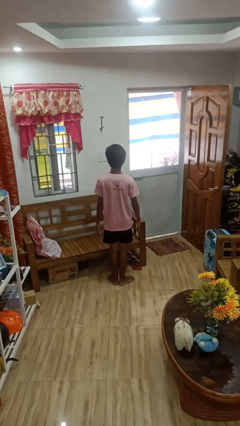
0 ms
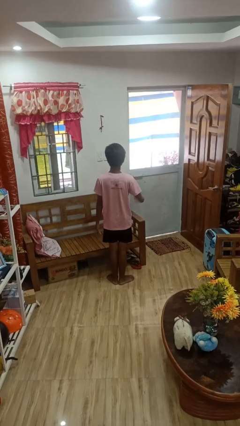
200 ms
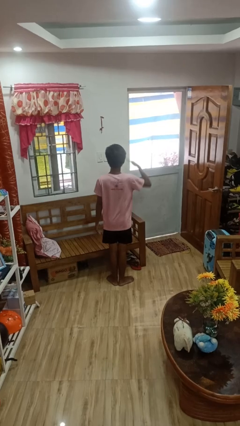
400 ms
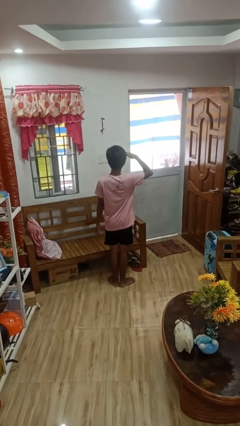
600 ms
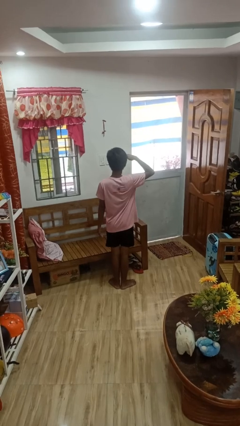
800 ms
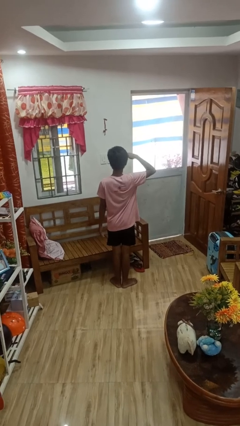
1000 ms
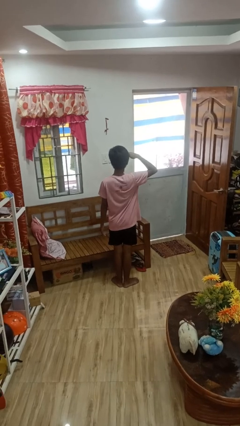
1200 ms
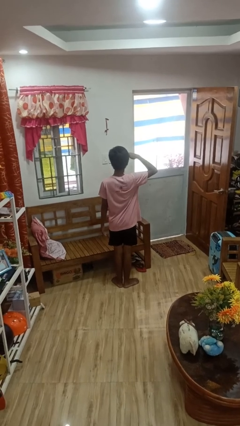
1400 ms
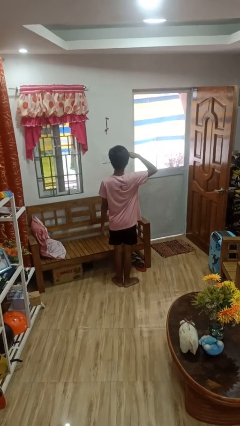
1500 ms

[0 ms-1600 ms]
person salutes

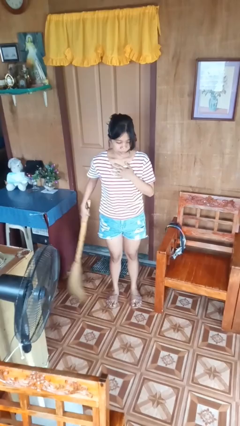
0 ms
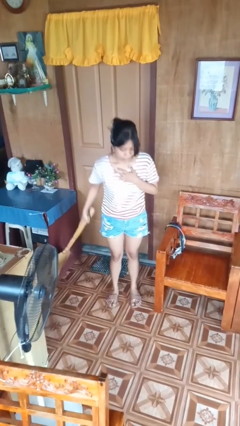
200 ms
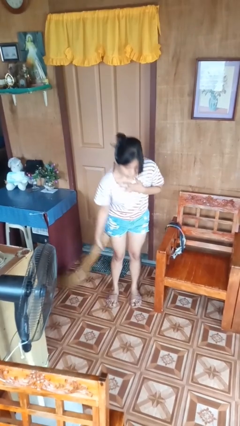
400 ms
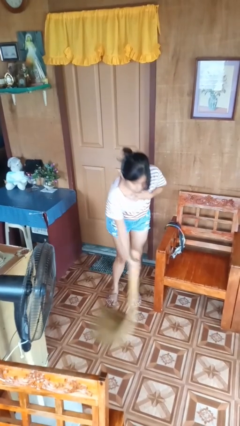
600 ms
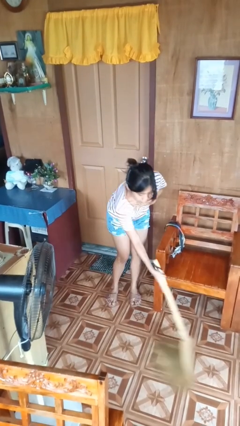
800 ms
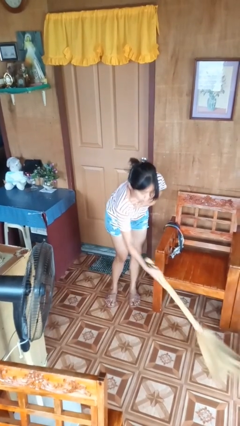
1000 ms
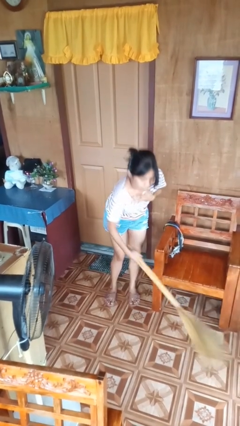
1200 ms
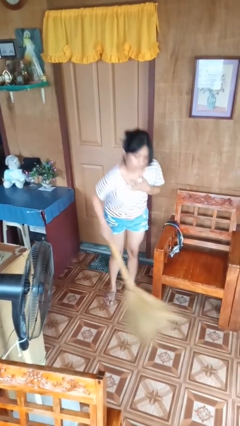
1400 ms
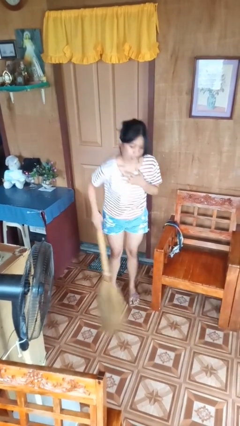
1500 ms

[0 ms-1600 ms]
person sweeps floor

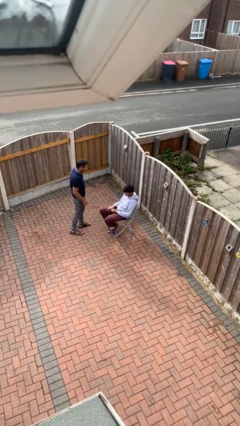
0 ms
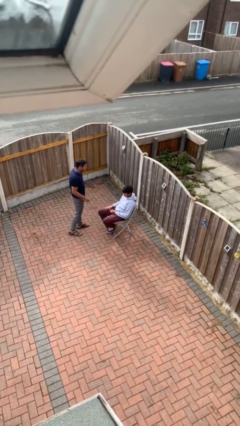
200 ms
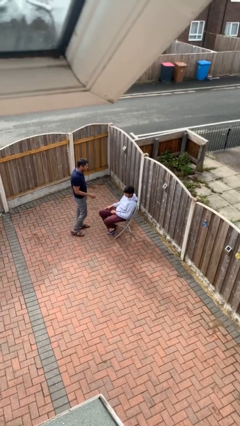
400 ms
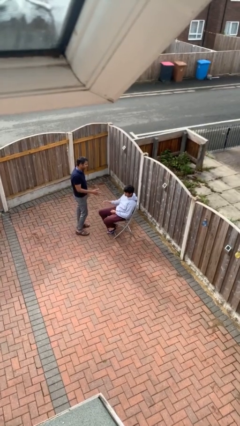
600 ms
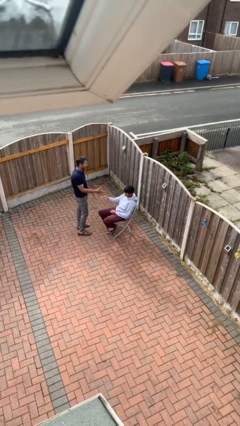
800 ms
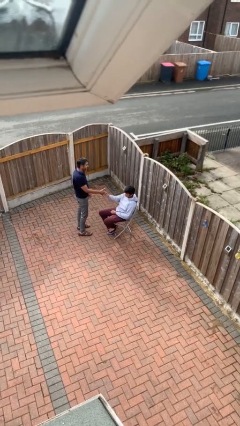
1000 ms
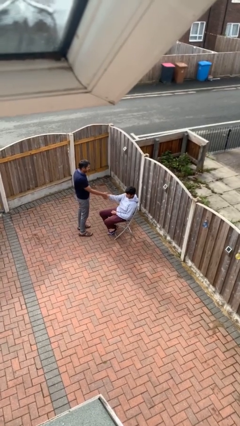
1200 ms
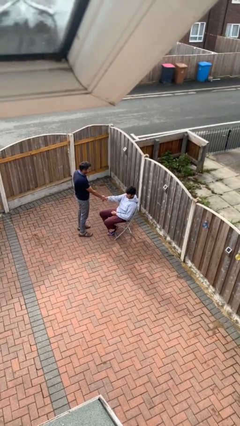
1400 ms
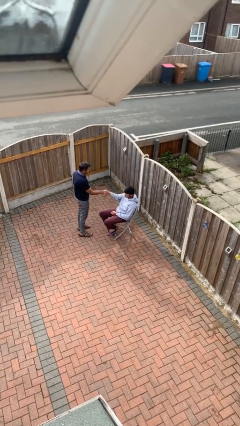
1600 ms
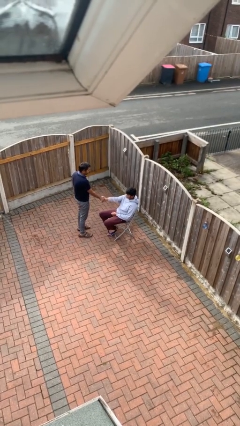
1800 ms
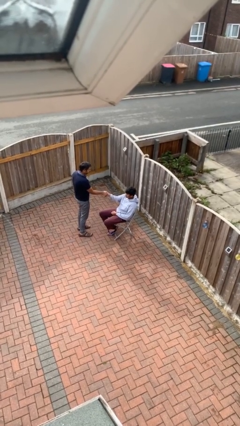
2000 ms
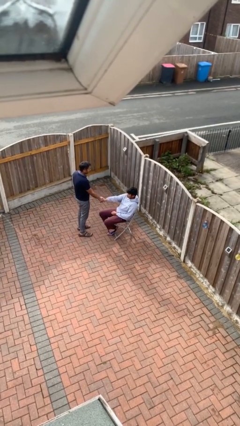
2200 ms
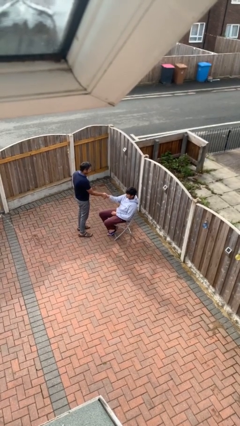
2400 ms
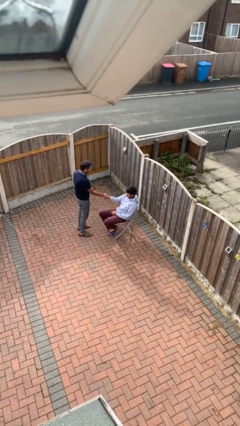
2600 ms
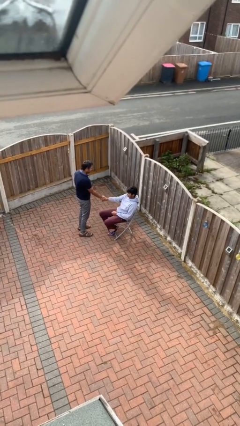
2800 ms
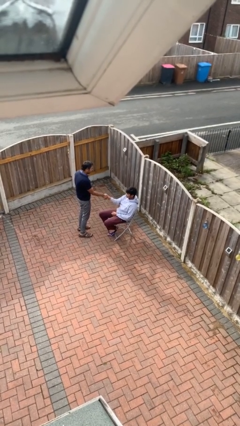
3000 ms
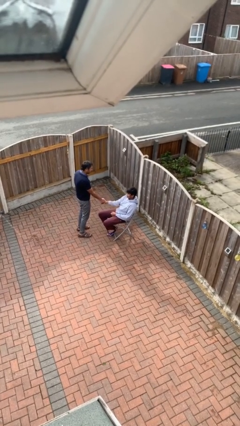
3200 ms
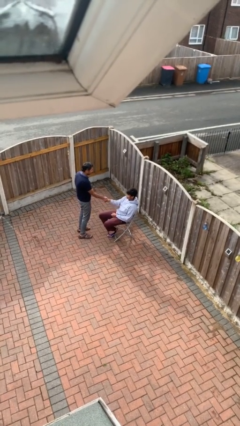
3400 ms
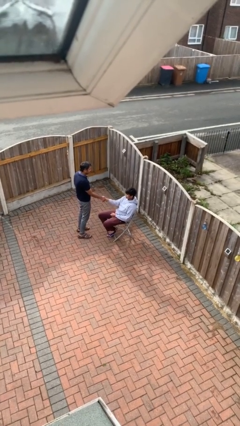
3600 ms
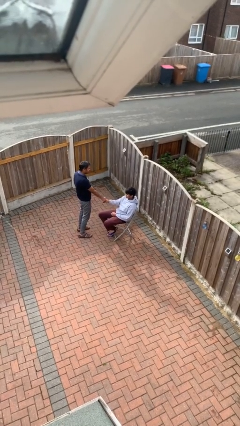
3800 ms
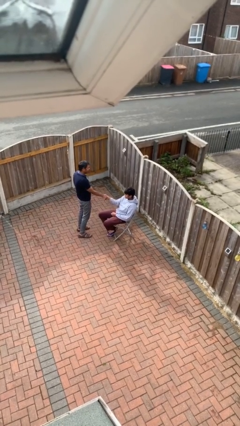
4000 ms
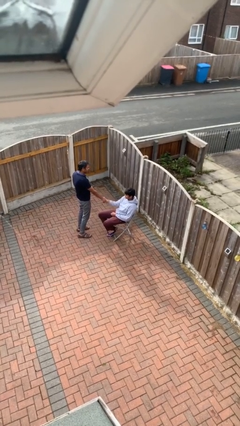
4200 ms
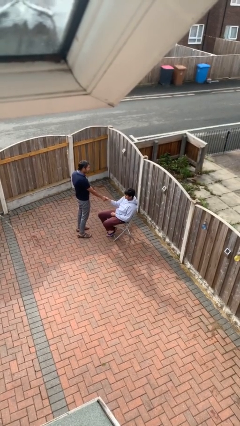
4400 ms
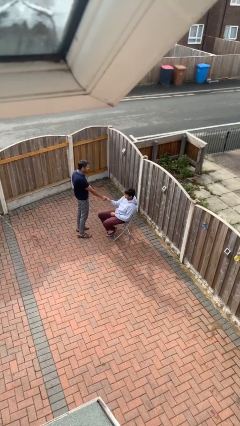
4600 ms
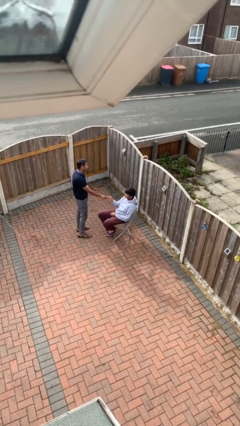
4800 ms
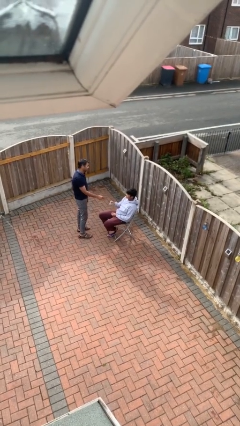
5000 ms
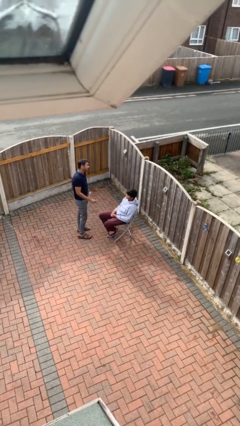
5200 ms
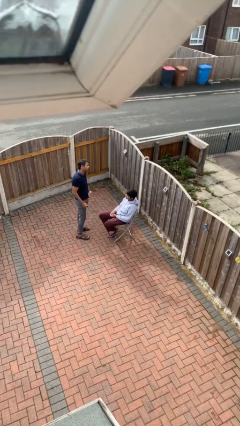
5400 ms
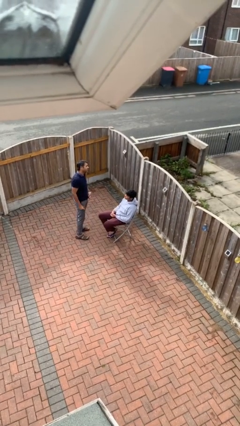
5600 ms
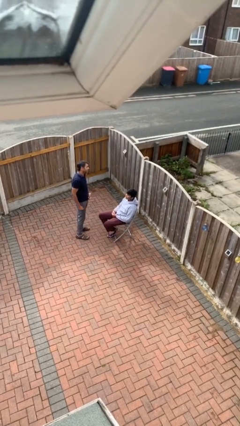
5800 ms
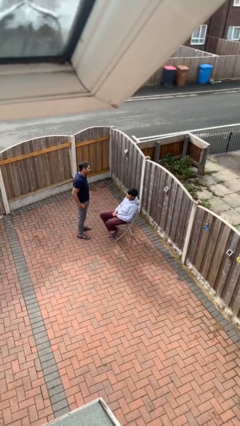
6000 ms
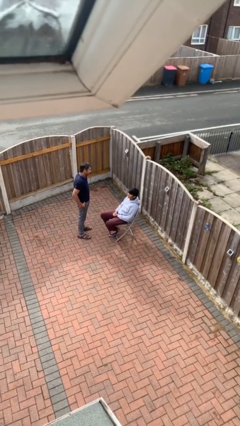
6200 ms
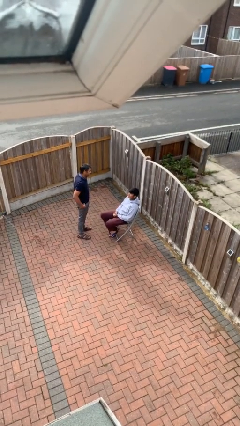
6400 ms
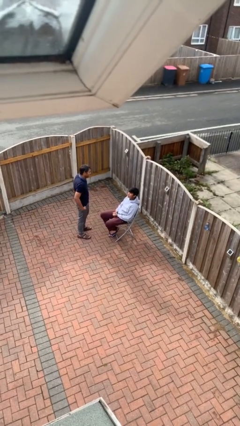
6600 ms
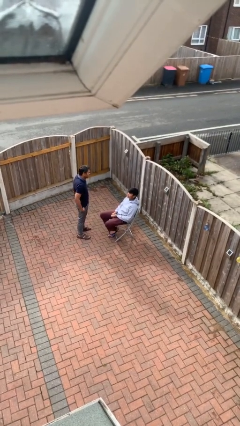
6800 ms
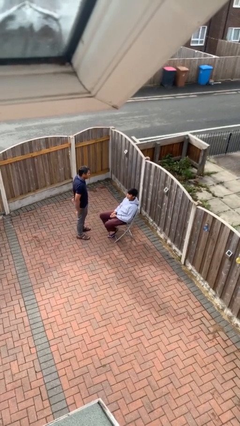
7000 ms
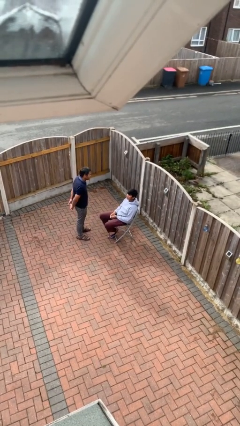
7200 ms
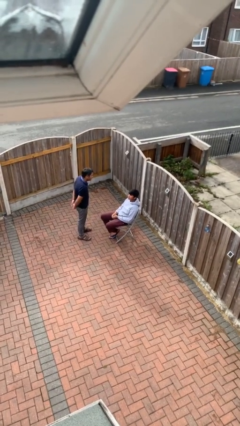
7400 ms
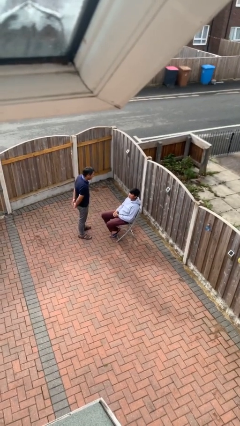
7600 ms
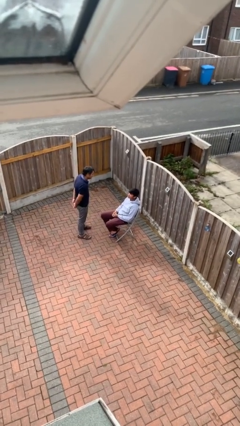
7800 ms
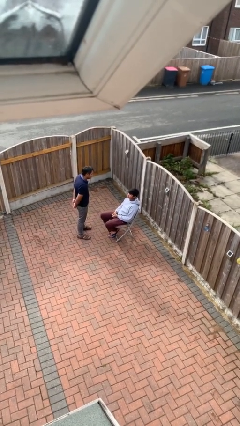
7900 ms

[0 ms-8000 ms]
person shakes hand

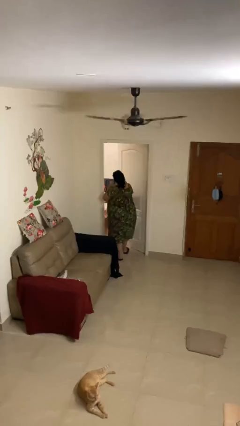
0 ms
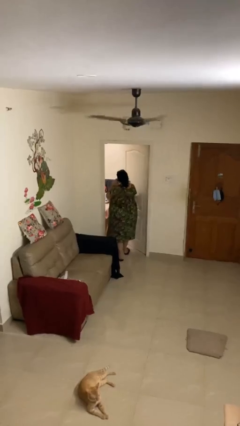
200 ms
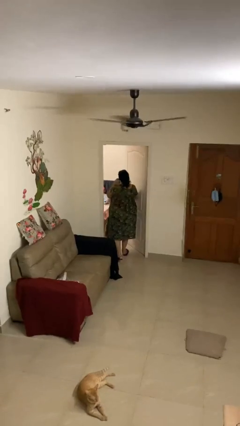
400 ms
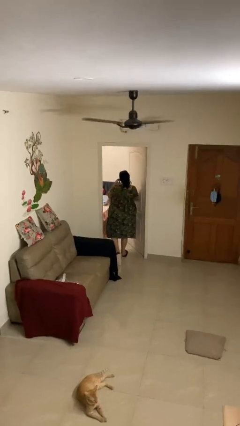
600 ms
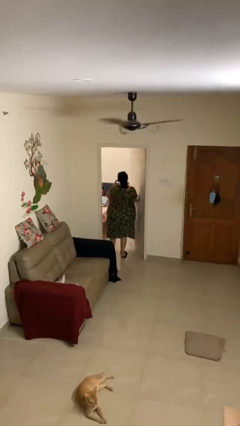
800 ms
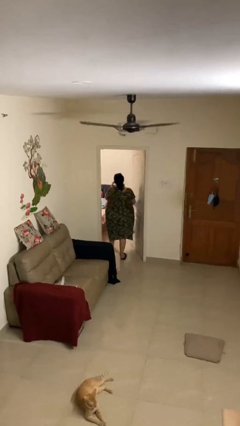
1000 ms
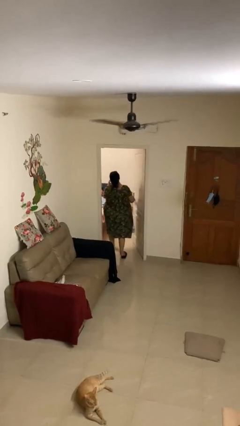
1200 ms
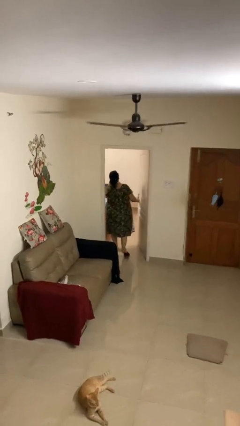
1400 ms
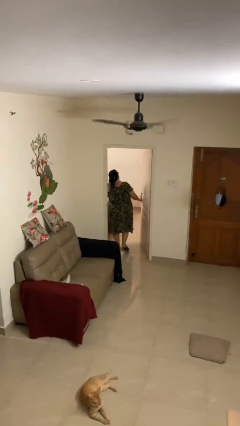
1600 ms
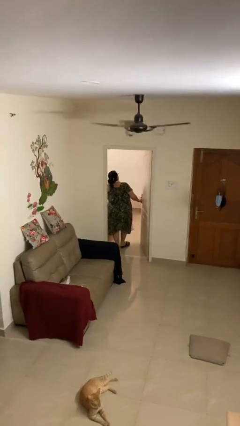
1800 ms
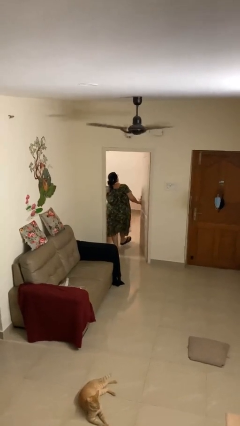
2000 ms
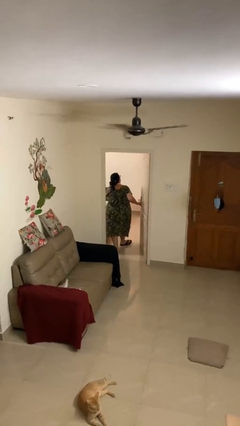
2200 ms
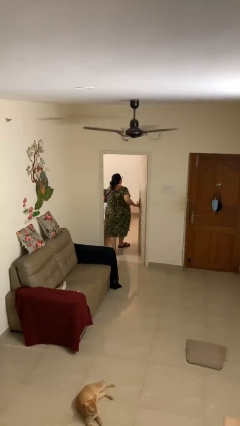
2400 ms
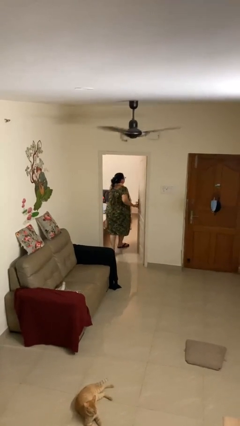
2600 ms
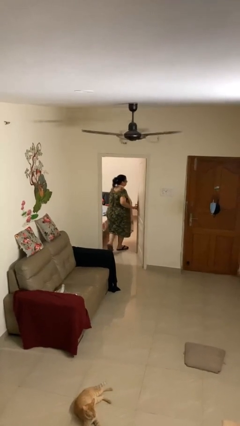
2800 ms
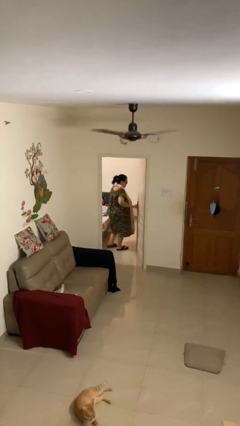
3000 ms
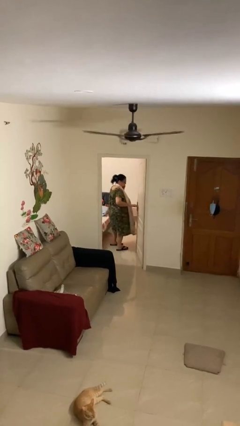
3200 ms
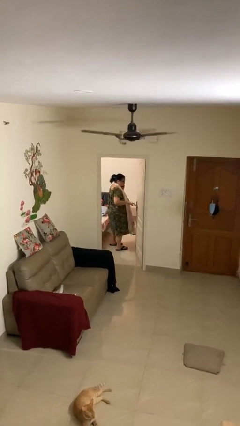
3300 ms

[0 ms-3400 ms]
person exits scene through structure

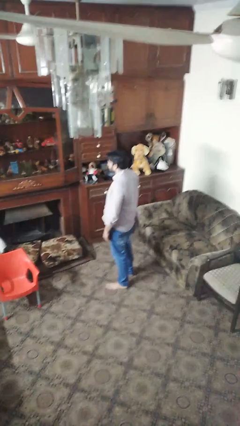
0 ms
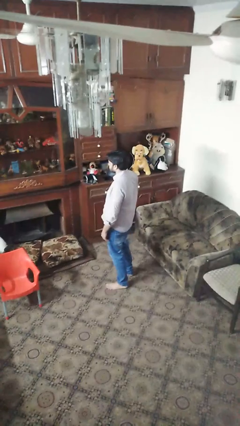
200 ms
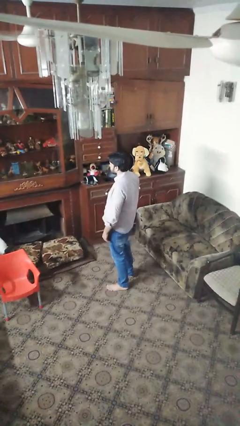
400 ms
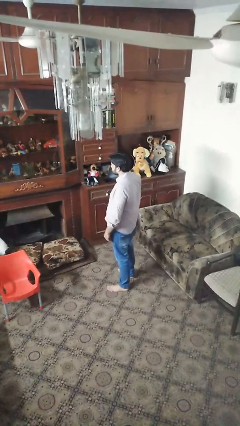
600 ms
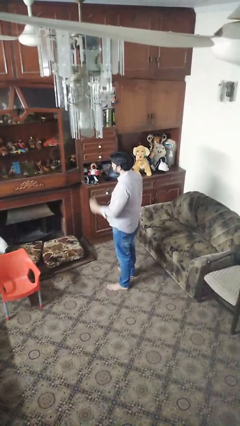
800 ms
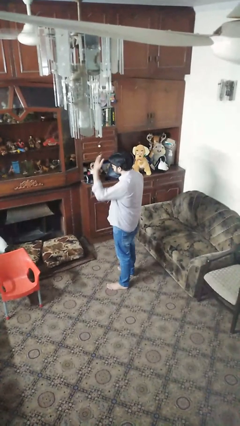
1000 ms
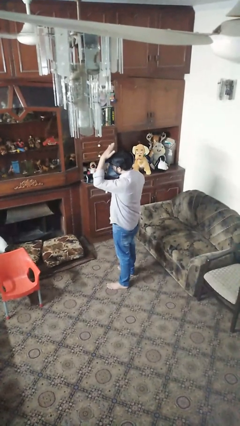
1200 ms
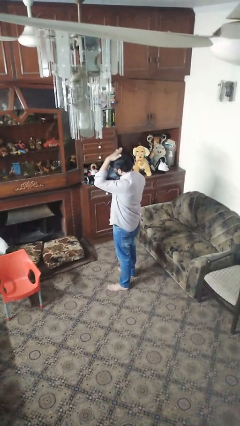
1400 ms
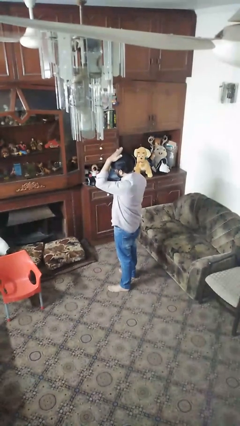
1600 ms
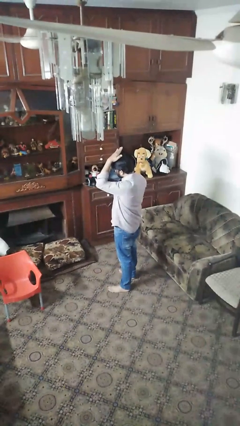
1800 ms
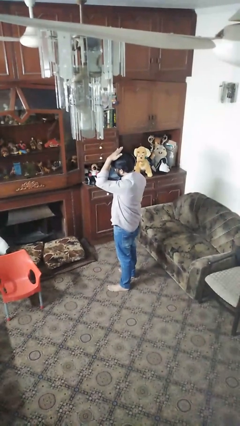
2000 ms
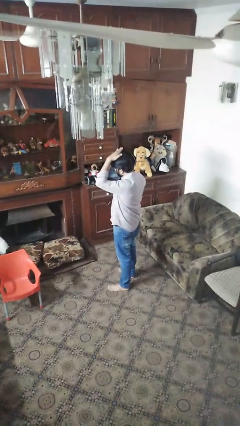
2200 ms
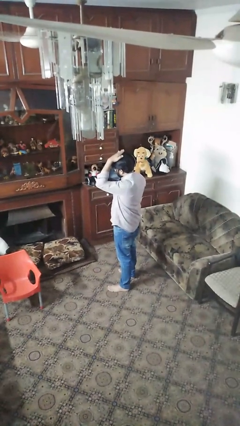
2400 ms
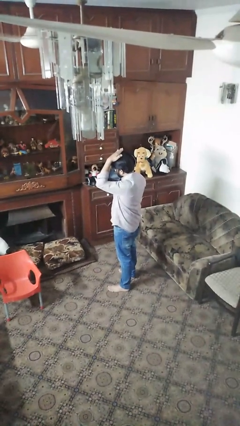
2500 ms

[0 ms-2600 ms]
person pats head

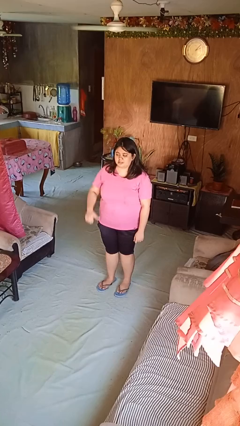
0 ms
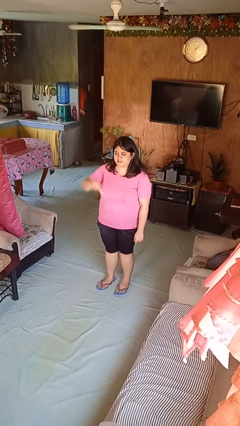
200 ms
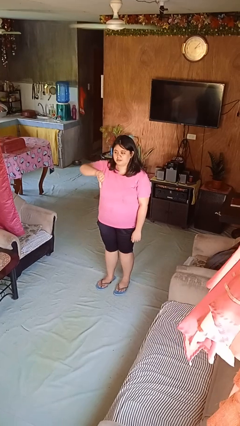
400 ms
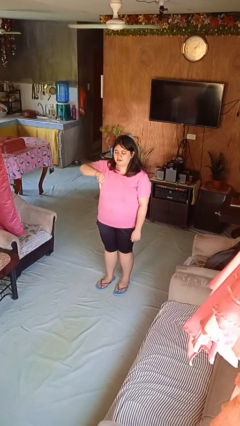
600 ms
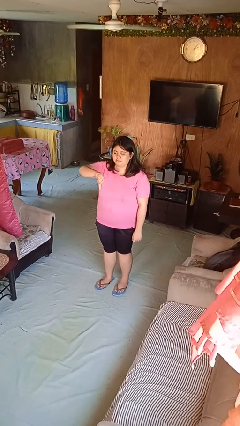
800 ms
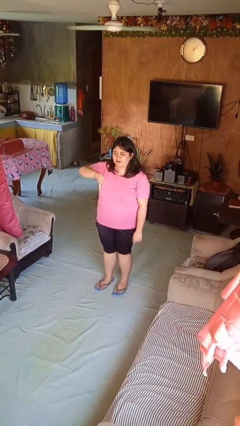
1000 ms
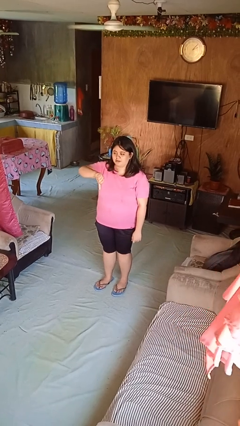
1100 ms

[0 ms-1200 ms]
person gestures thumbs down
